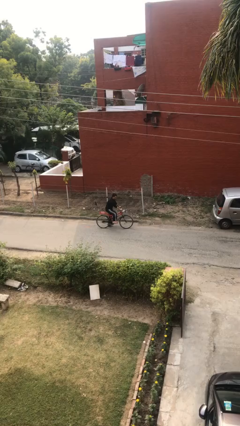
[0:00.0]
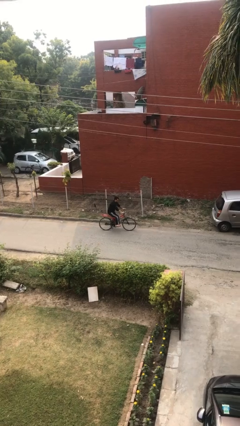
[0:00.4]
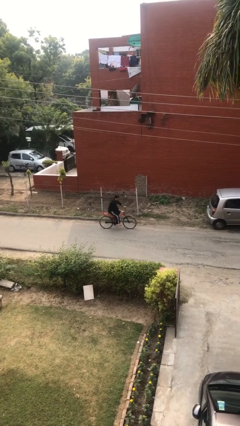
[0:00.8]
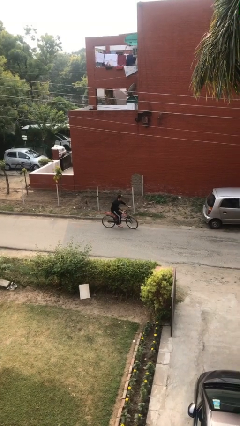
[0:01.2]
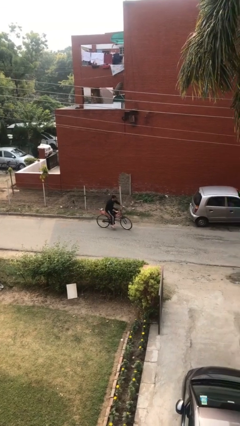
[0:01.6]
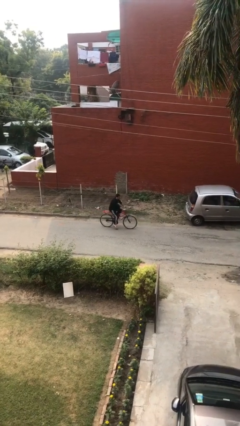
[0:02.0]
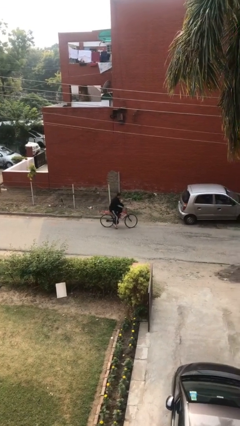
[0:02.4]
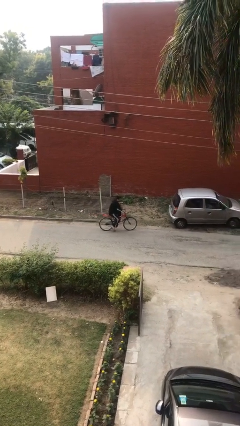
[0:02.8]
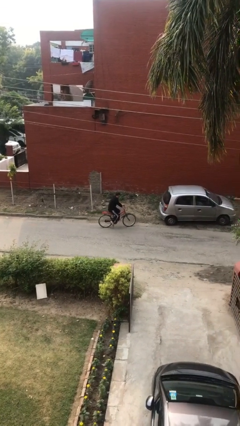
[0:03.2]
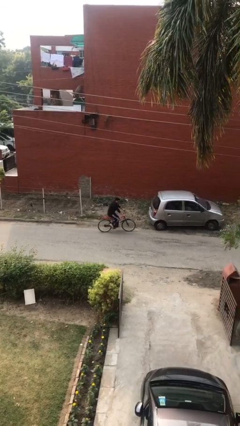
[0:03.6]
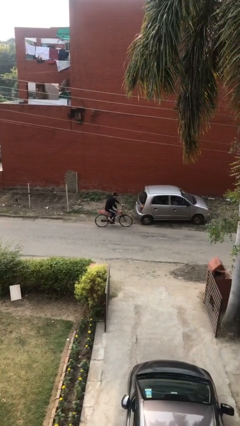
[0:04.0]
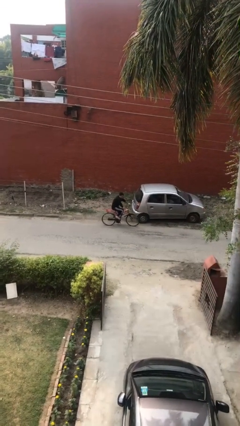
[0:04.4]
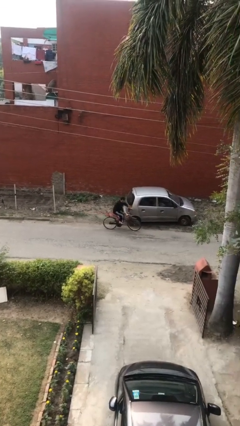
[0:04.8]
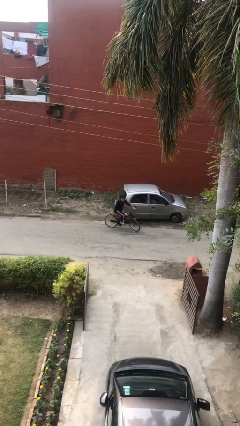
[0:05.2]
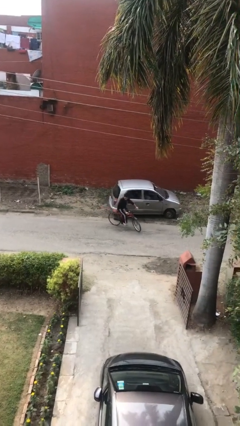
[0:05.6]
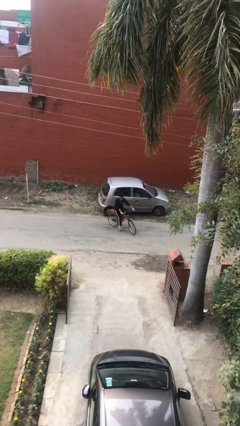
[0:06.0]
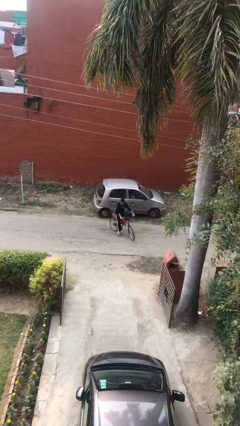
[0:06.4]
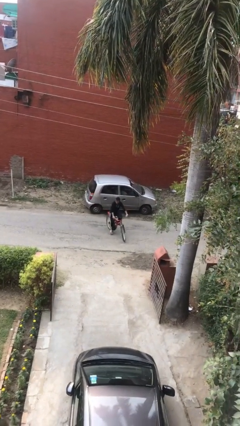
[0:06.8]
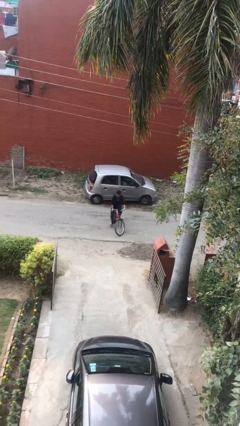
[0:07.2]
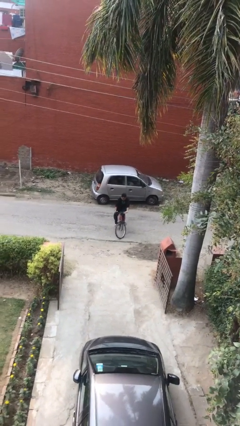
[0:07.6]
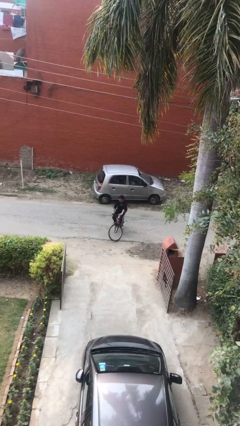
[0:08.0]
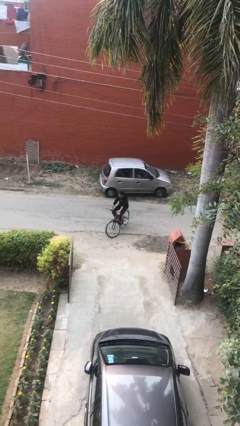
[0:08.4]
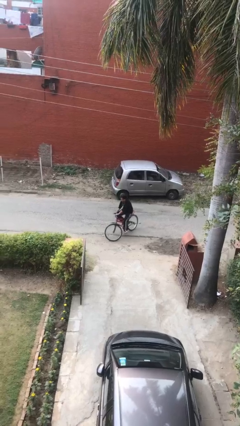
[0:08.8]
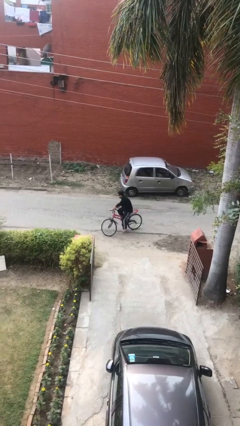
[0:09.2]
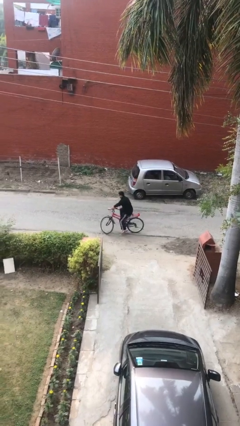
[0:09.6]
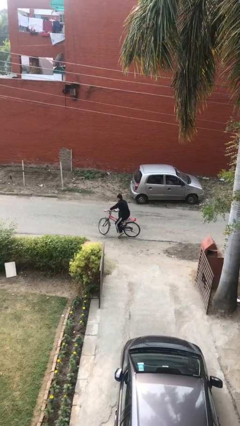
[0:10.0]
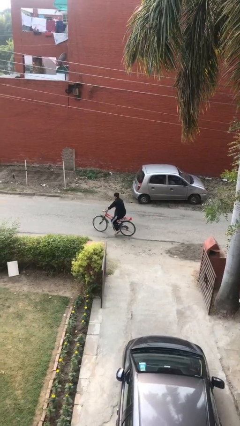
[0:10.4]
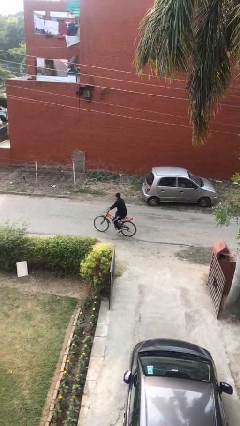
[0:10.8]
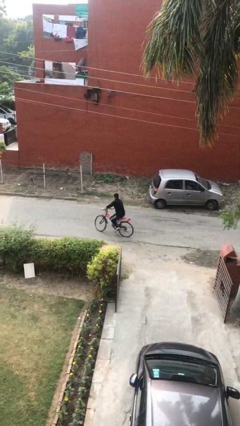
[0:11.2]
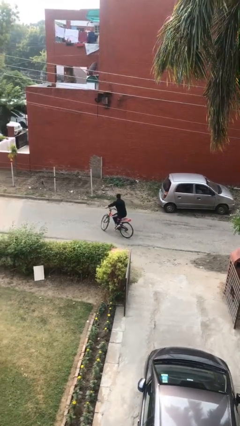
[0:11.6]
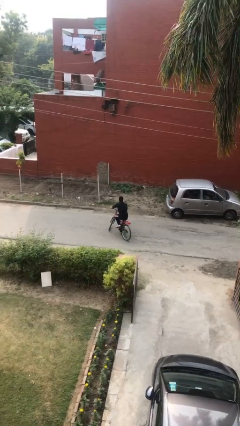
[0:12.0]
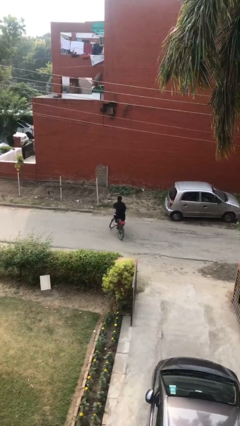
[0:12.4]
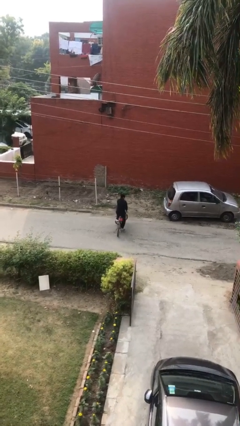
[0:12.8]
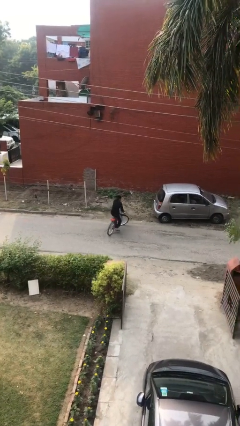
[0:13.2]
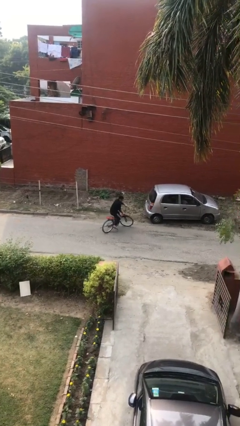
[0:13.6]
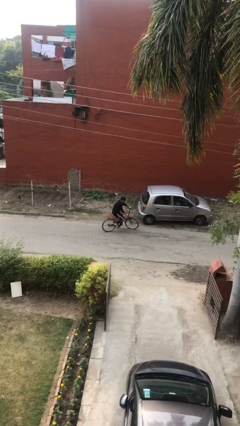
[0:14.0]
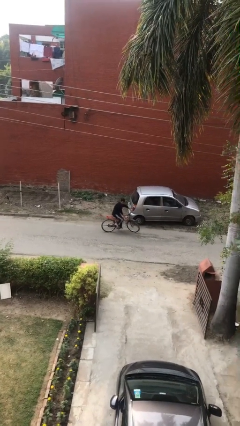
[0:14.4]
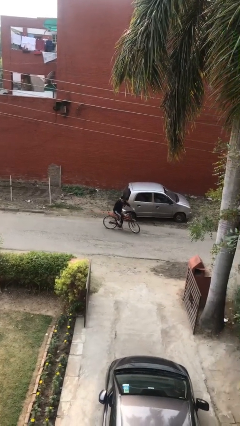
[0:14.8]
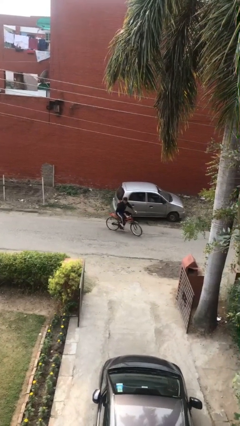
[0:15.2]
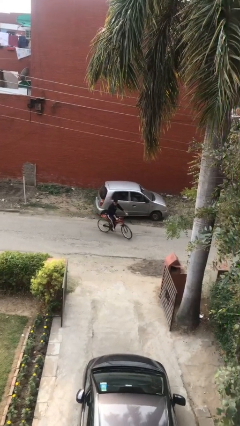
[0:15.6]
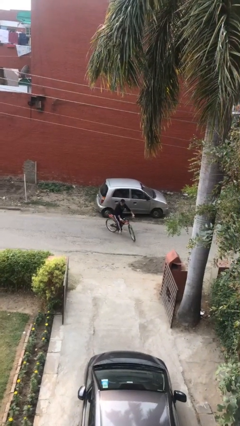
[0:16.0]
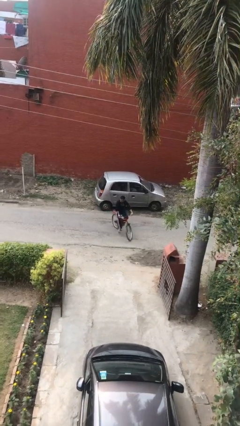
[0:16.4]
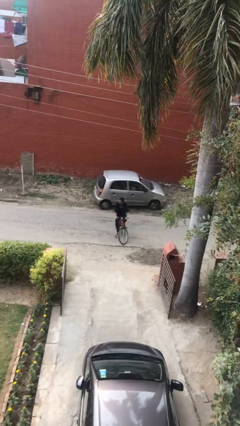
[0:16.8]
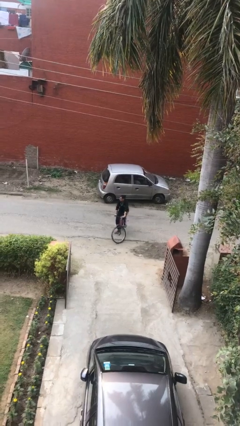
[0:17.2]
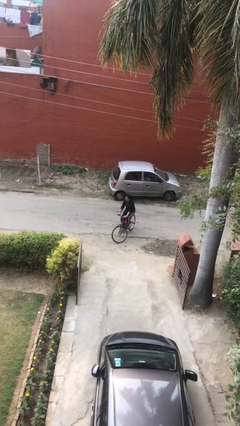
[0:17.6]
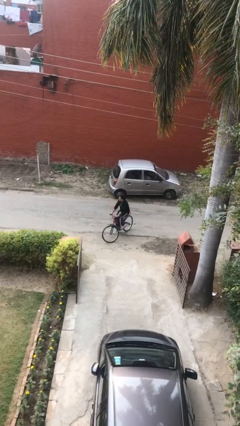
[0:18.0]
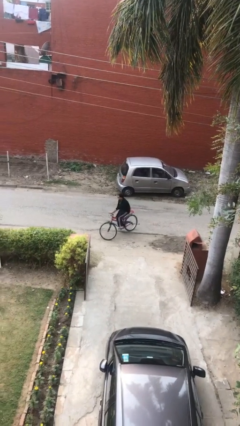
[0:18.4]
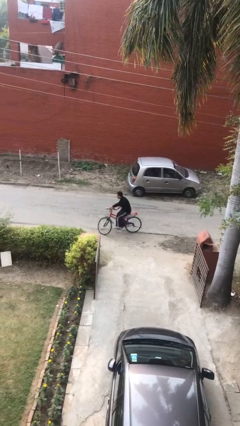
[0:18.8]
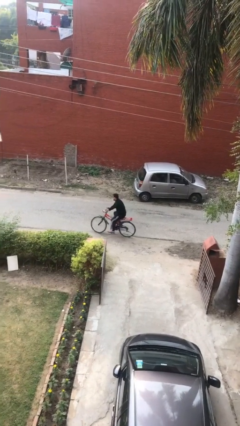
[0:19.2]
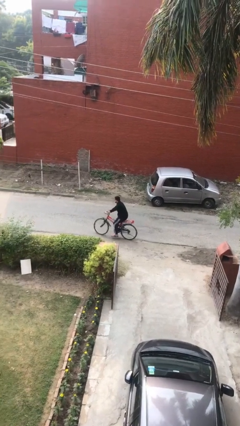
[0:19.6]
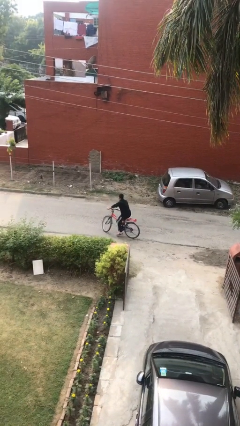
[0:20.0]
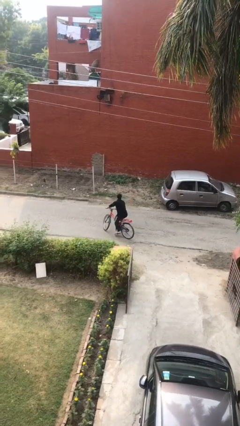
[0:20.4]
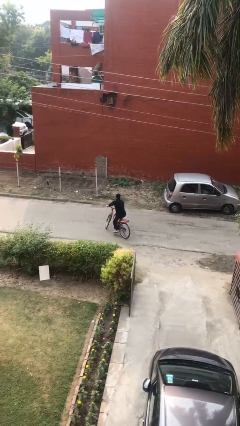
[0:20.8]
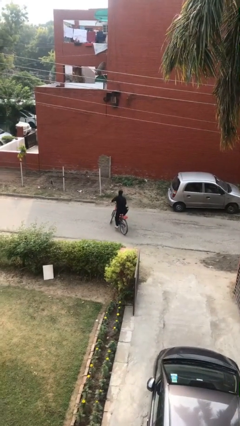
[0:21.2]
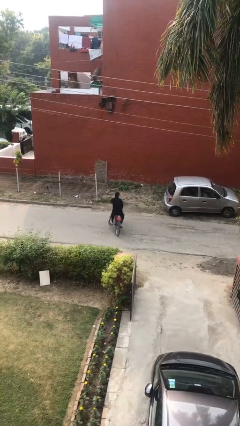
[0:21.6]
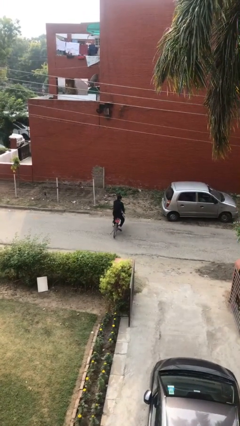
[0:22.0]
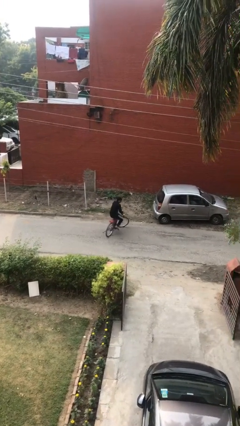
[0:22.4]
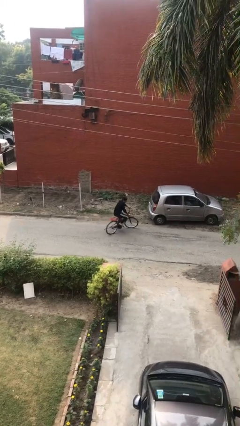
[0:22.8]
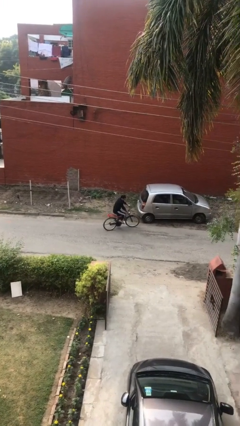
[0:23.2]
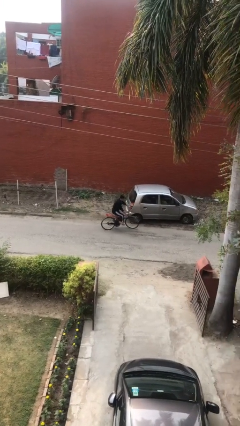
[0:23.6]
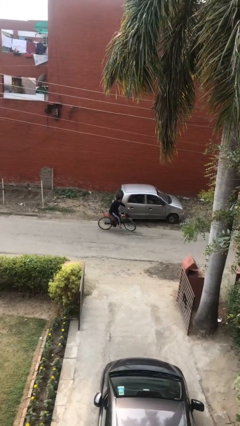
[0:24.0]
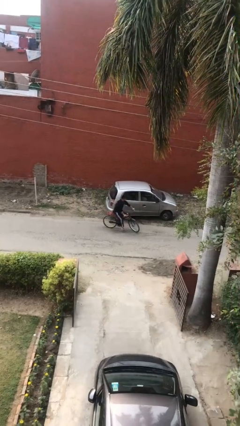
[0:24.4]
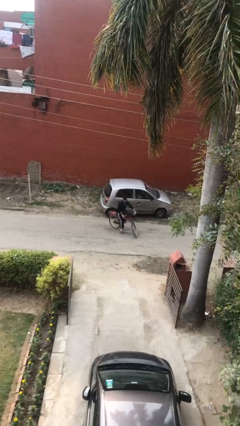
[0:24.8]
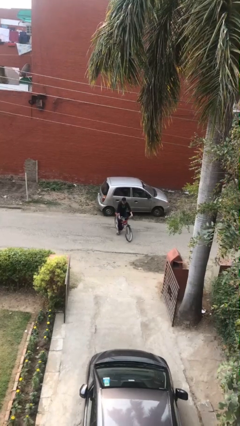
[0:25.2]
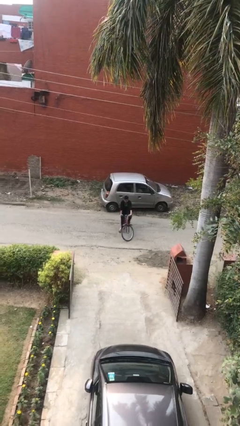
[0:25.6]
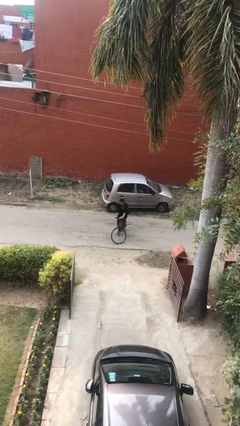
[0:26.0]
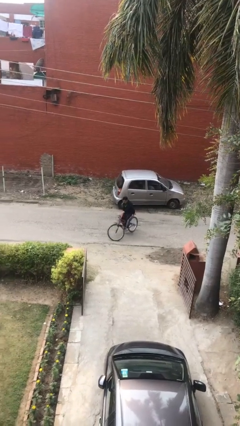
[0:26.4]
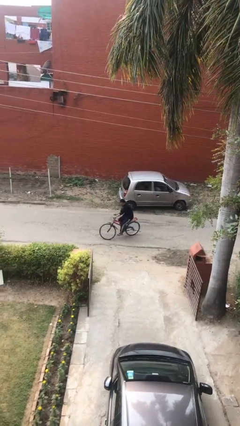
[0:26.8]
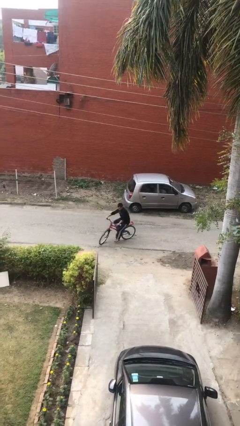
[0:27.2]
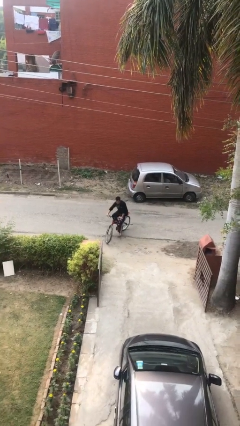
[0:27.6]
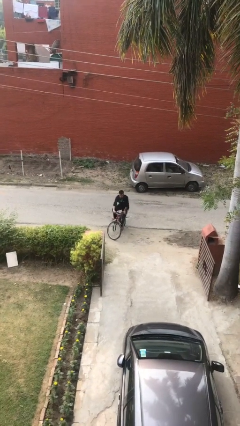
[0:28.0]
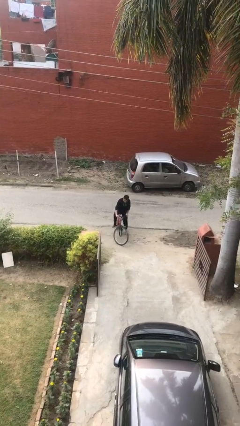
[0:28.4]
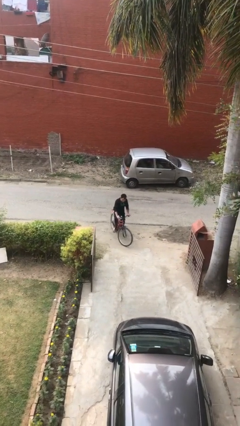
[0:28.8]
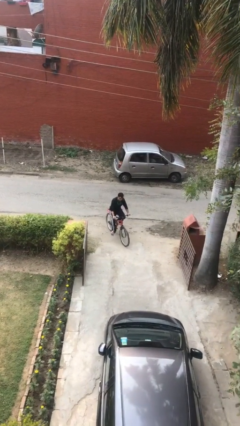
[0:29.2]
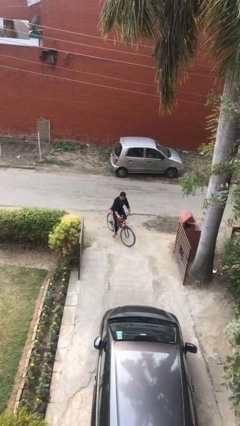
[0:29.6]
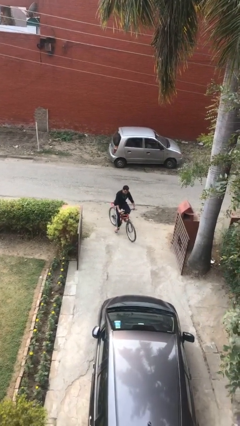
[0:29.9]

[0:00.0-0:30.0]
person rides bicycle

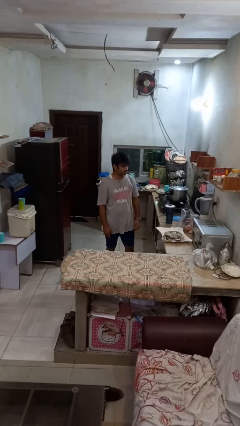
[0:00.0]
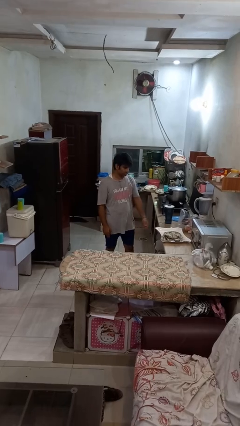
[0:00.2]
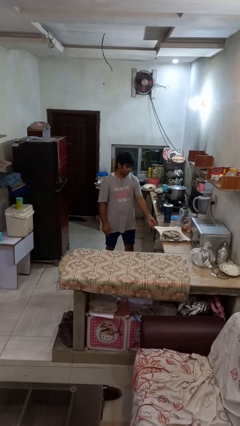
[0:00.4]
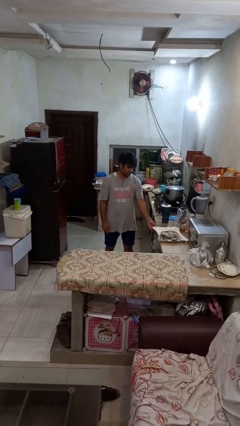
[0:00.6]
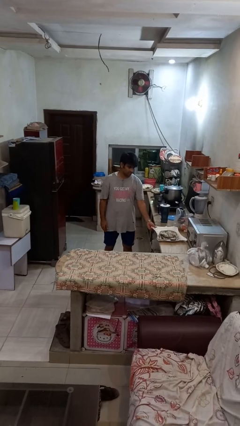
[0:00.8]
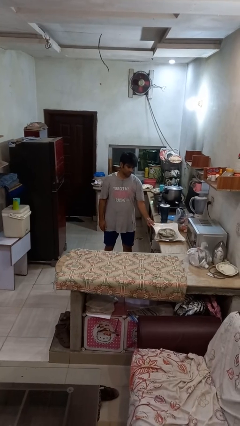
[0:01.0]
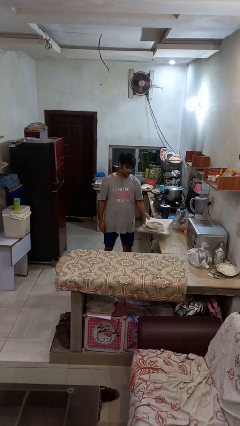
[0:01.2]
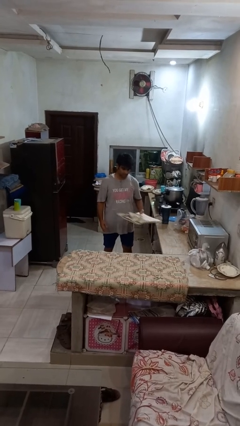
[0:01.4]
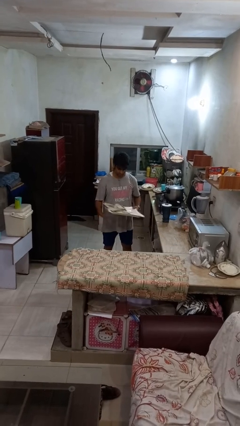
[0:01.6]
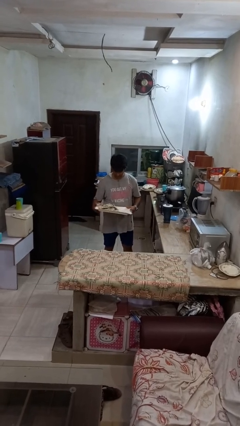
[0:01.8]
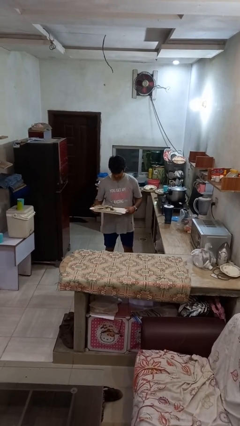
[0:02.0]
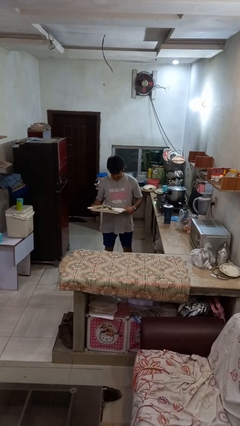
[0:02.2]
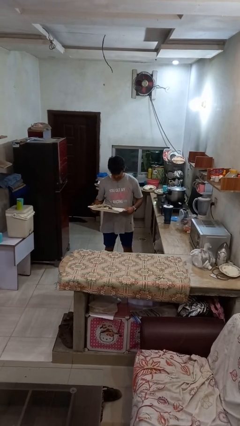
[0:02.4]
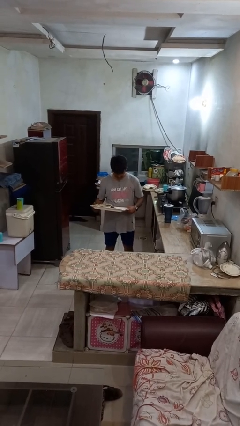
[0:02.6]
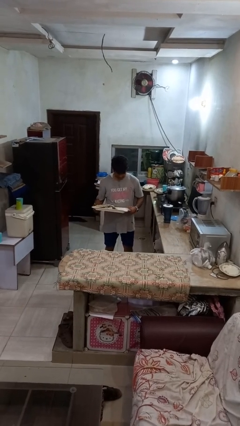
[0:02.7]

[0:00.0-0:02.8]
person picks up object from countertop

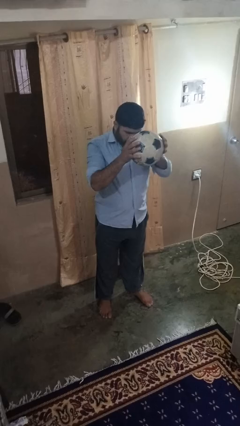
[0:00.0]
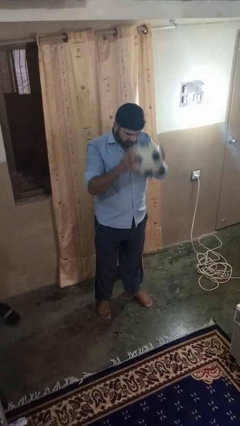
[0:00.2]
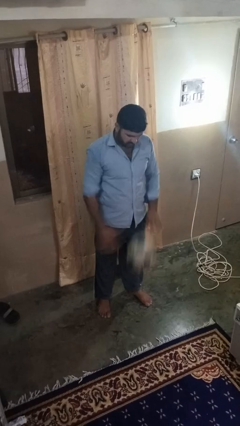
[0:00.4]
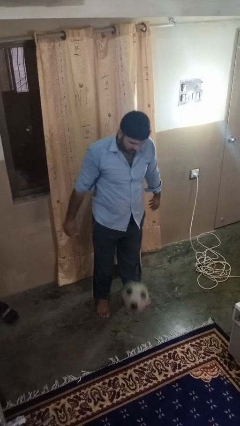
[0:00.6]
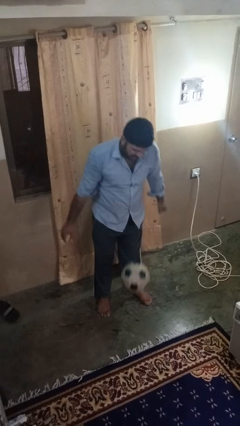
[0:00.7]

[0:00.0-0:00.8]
person bounces ball on floor
